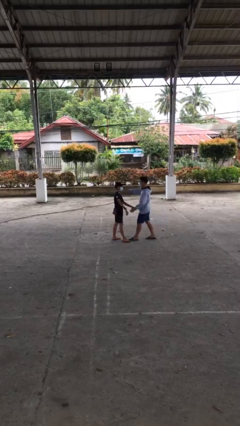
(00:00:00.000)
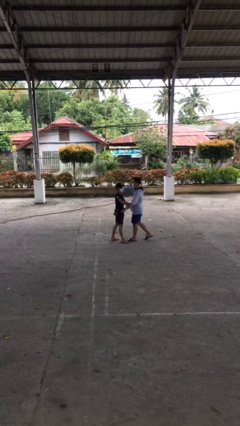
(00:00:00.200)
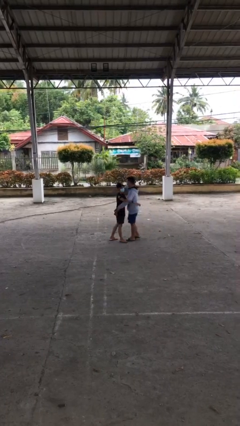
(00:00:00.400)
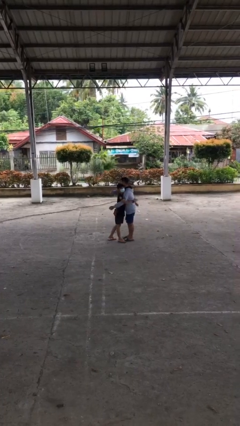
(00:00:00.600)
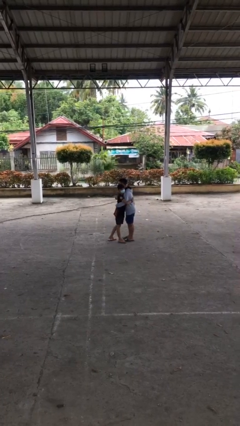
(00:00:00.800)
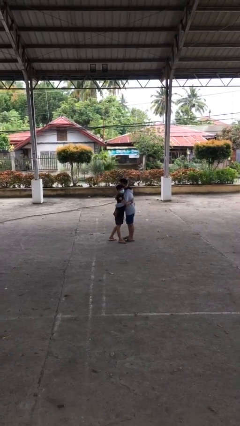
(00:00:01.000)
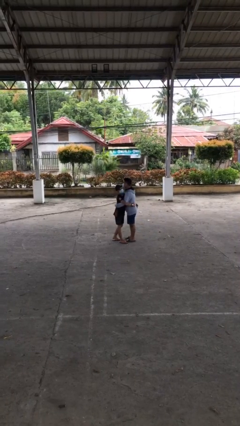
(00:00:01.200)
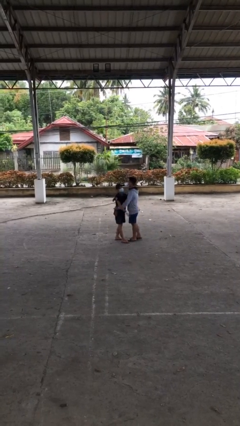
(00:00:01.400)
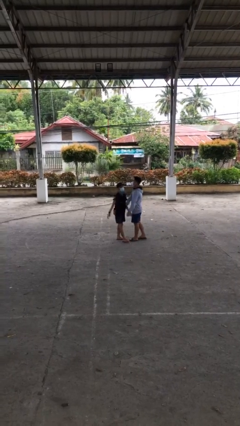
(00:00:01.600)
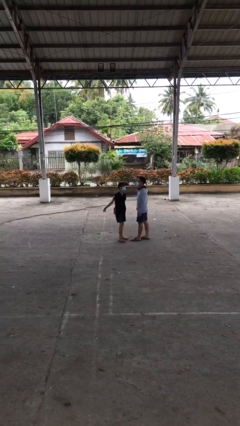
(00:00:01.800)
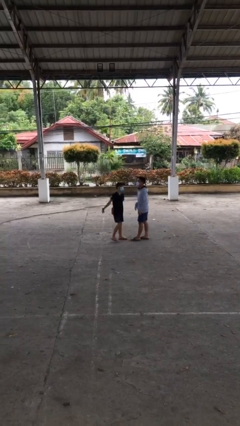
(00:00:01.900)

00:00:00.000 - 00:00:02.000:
person embraces person

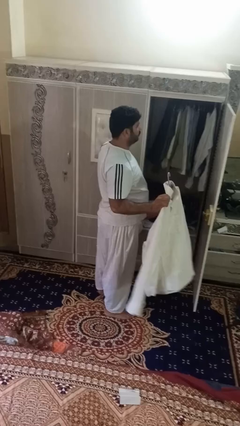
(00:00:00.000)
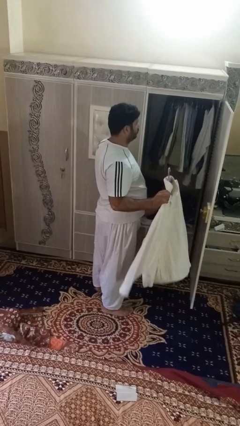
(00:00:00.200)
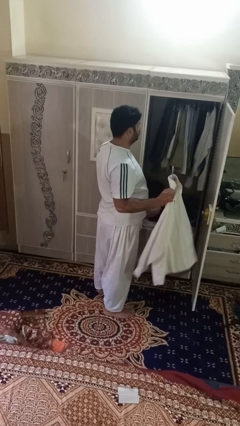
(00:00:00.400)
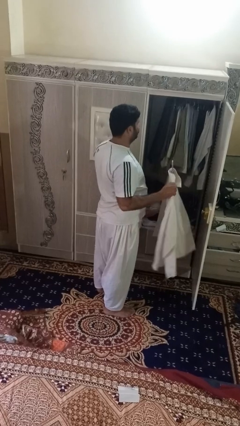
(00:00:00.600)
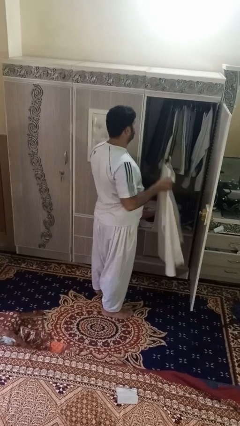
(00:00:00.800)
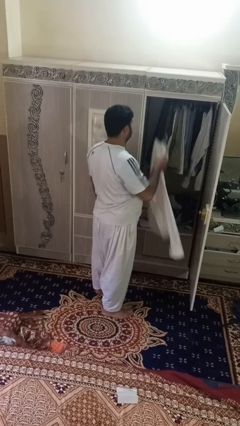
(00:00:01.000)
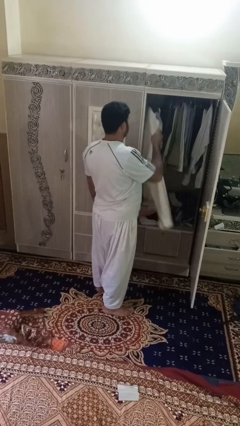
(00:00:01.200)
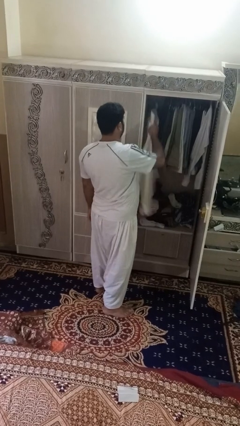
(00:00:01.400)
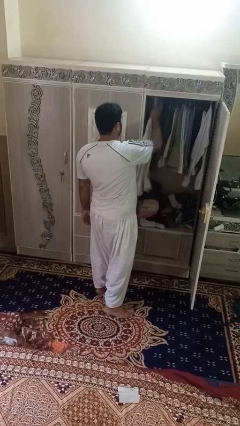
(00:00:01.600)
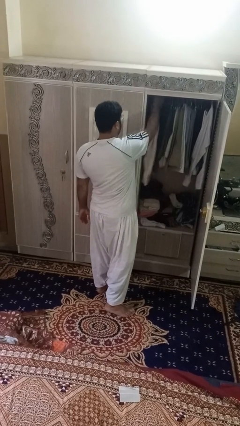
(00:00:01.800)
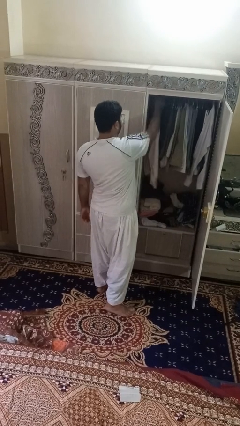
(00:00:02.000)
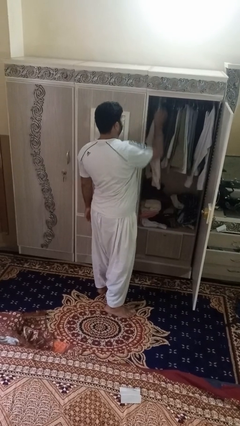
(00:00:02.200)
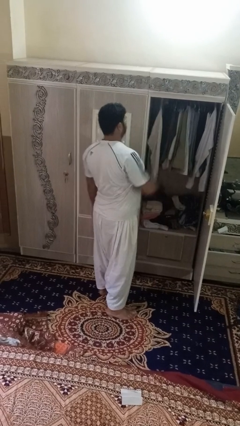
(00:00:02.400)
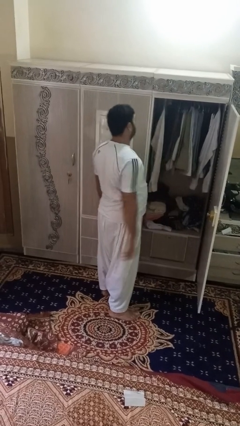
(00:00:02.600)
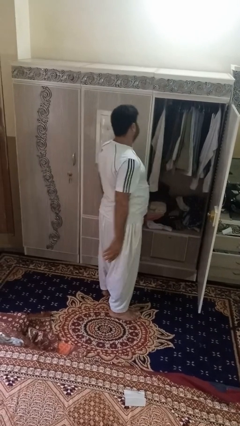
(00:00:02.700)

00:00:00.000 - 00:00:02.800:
person puts clothes into closet

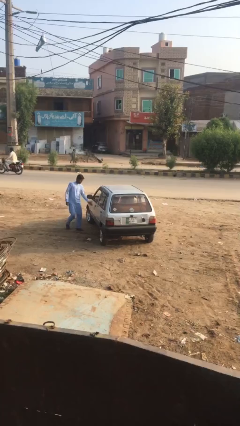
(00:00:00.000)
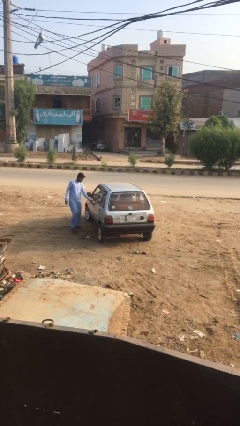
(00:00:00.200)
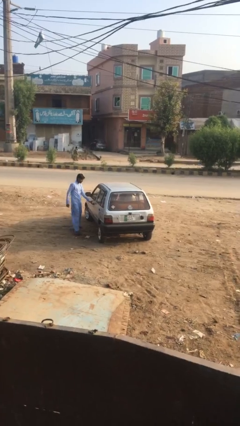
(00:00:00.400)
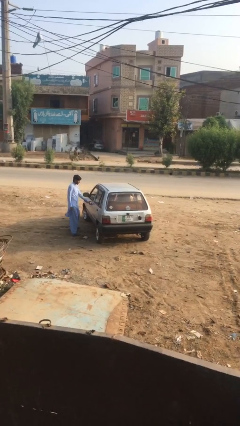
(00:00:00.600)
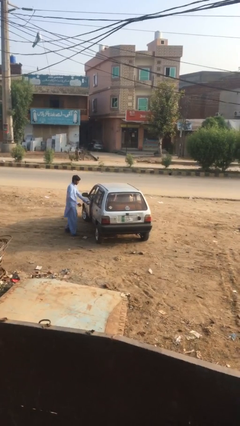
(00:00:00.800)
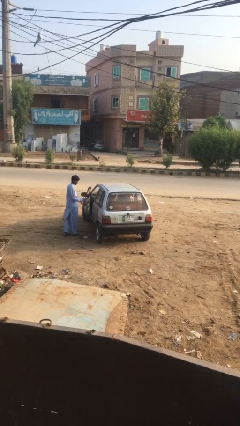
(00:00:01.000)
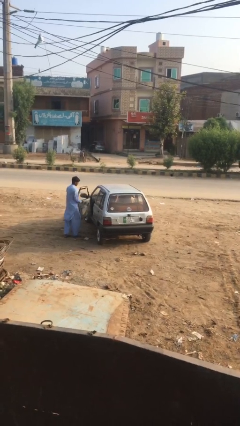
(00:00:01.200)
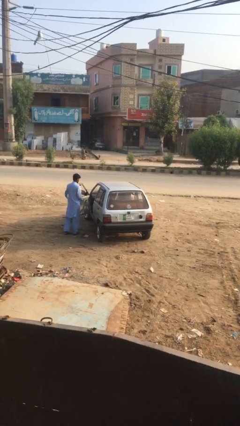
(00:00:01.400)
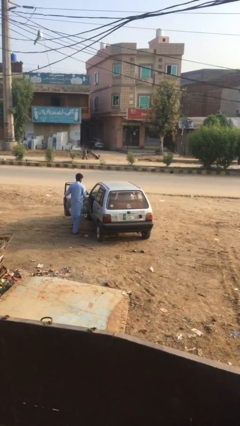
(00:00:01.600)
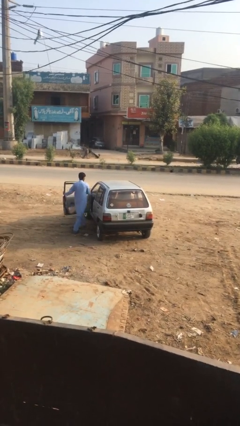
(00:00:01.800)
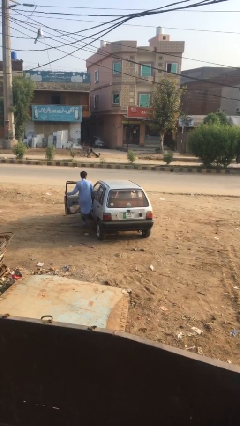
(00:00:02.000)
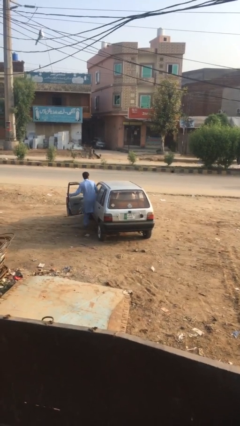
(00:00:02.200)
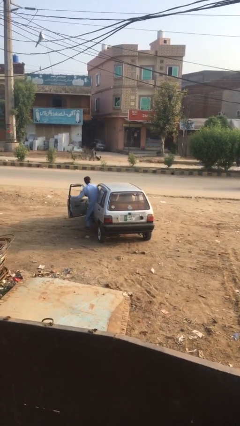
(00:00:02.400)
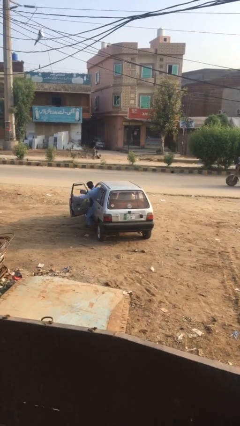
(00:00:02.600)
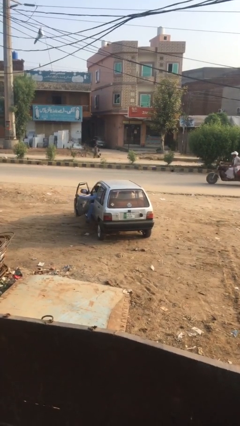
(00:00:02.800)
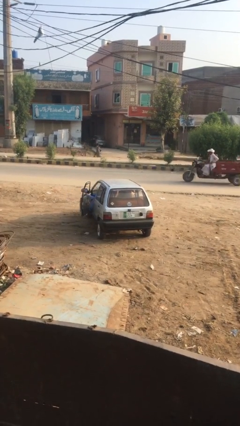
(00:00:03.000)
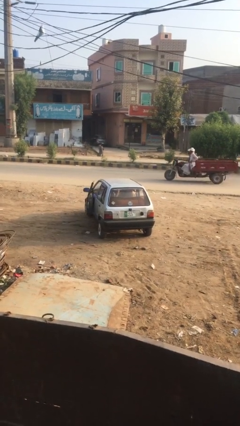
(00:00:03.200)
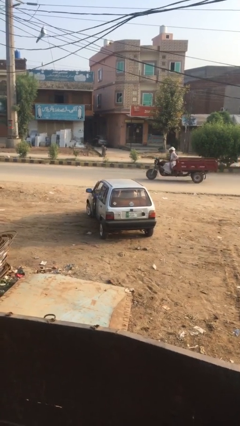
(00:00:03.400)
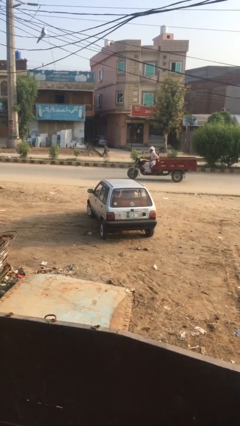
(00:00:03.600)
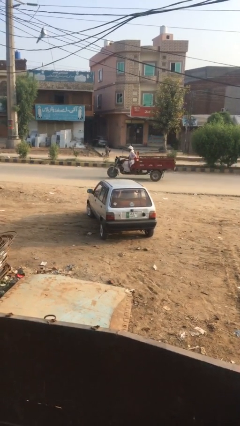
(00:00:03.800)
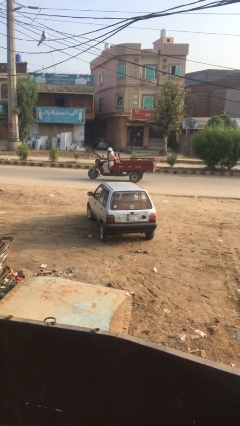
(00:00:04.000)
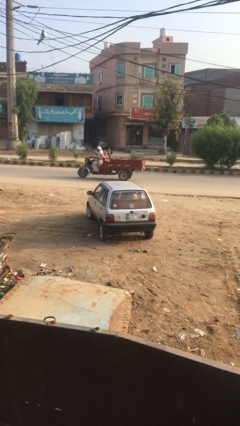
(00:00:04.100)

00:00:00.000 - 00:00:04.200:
car picks up person

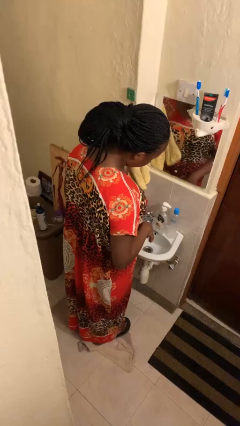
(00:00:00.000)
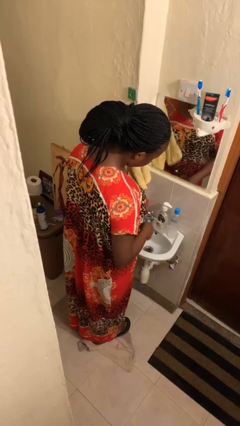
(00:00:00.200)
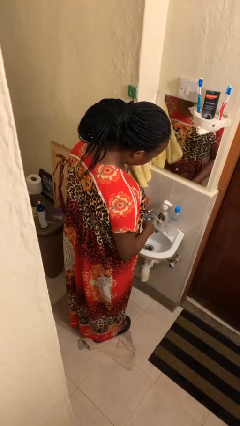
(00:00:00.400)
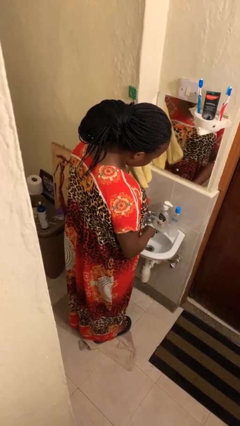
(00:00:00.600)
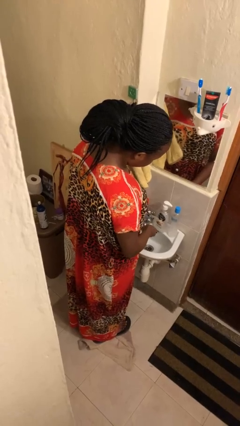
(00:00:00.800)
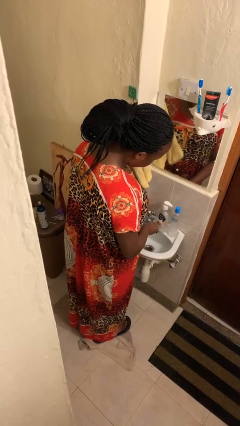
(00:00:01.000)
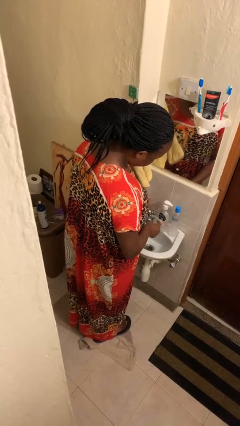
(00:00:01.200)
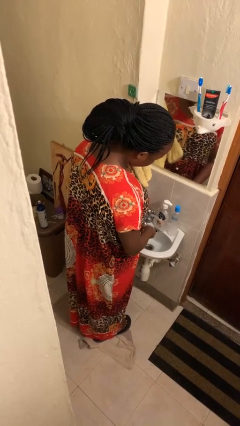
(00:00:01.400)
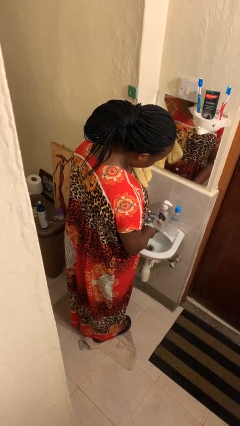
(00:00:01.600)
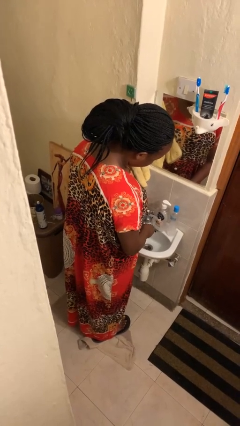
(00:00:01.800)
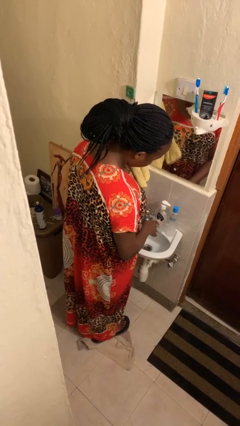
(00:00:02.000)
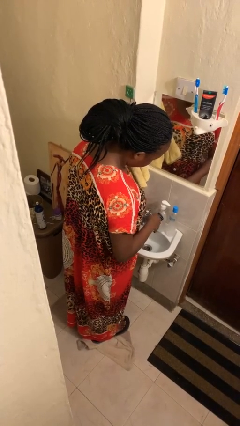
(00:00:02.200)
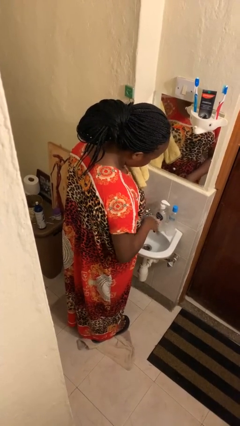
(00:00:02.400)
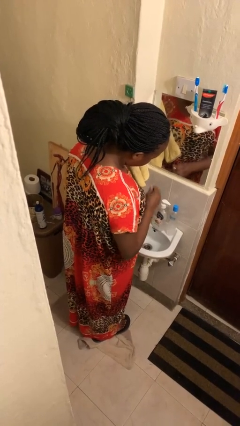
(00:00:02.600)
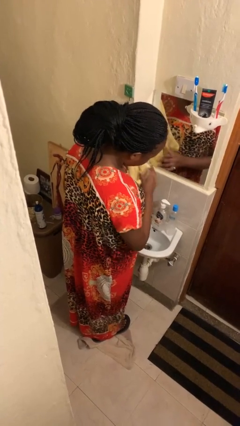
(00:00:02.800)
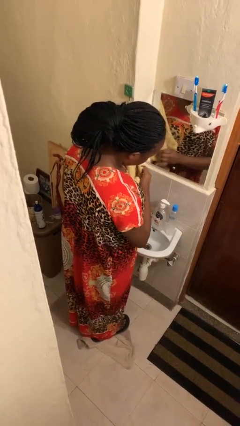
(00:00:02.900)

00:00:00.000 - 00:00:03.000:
person washes hands

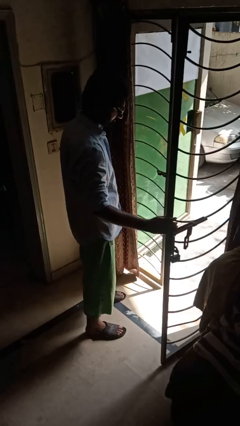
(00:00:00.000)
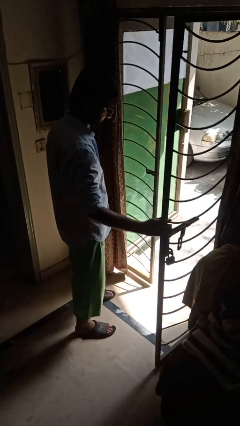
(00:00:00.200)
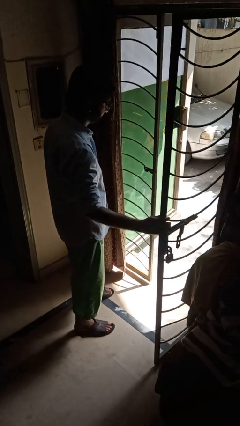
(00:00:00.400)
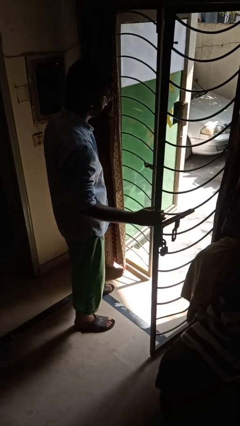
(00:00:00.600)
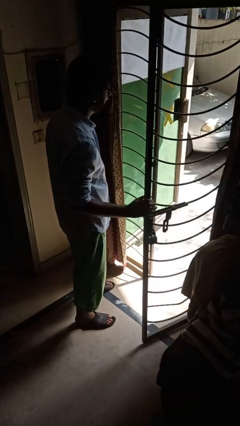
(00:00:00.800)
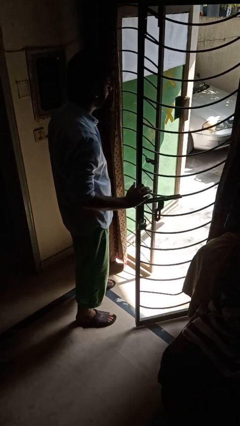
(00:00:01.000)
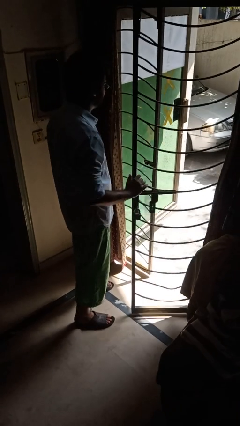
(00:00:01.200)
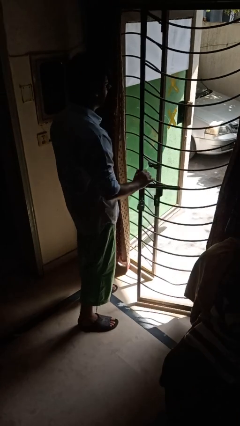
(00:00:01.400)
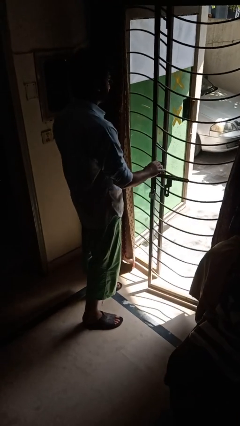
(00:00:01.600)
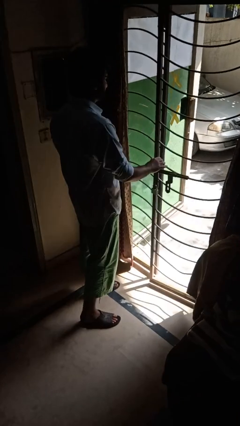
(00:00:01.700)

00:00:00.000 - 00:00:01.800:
person closes gate

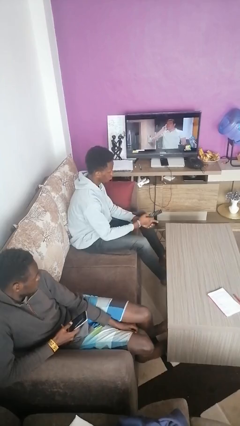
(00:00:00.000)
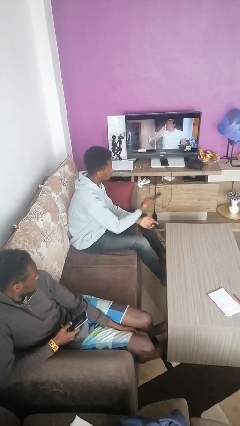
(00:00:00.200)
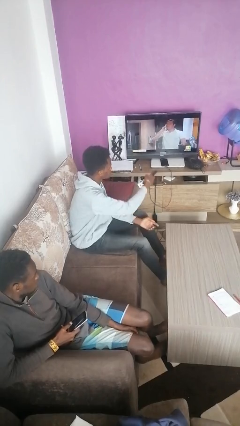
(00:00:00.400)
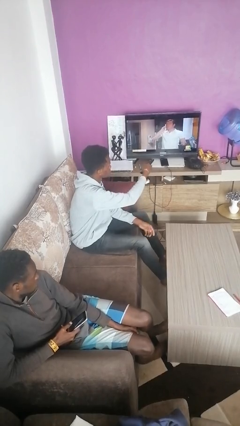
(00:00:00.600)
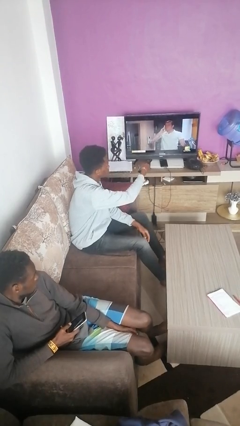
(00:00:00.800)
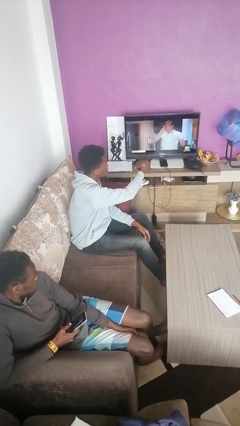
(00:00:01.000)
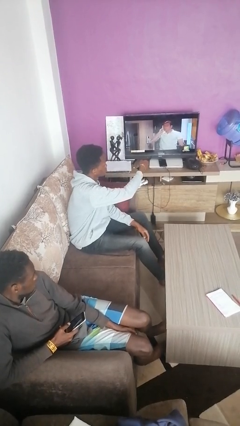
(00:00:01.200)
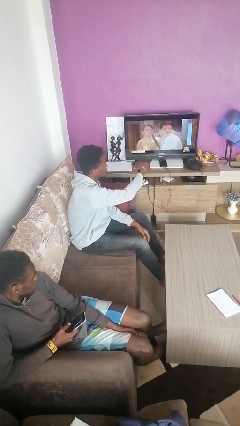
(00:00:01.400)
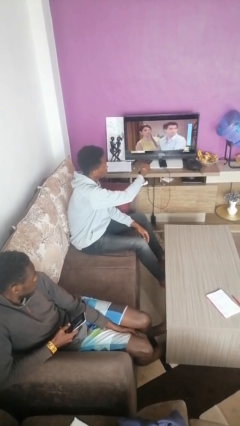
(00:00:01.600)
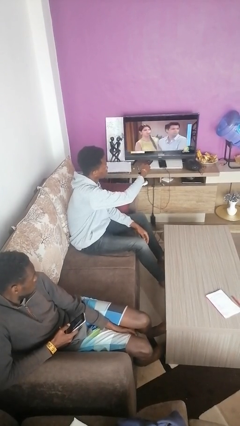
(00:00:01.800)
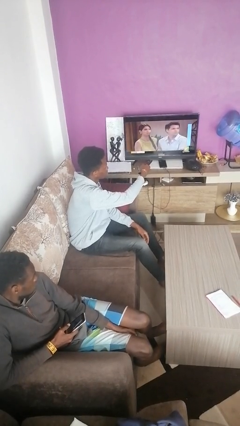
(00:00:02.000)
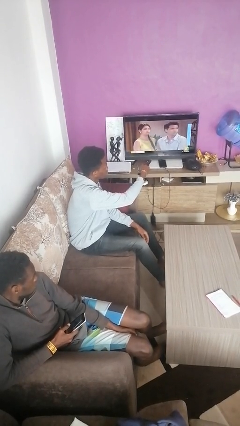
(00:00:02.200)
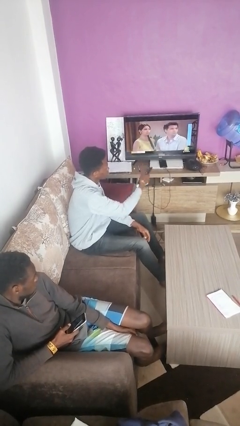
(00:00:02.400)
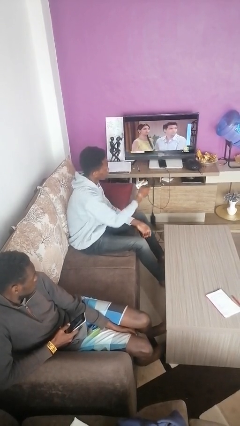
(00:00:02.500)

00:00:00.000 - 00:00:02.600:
person uses television remote

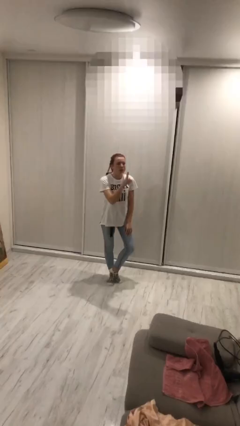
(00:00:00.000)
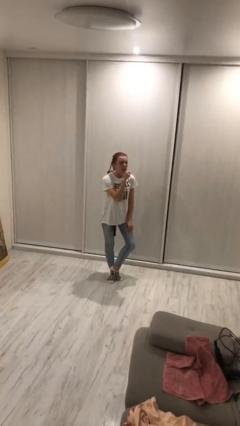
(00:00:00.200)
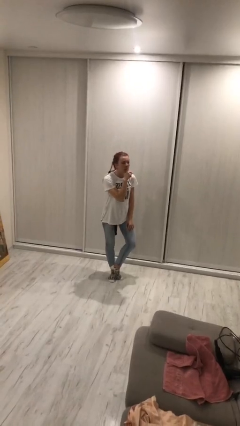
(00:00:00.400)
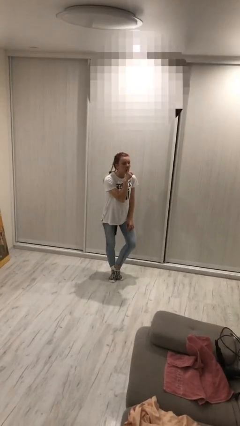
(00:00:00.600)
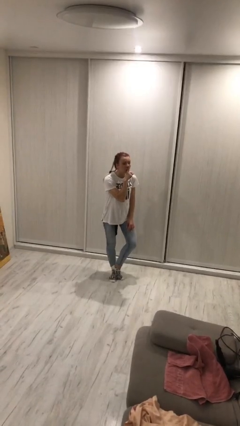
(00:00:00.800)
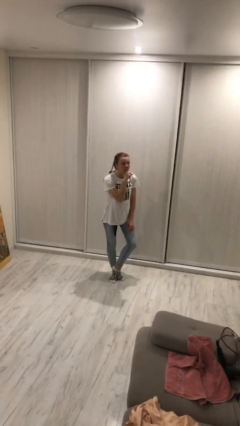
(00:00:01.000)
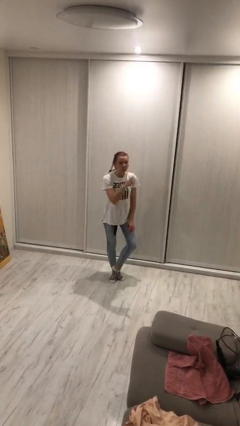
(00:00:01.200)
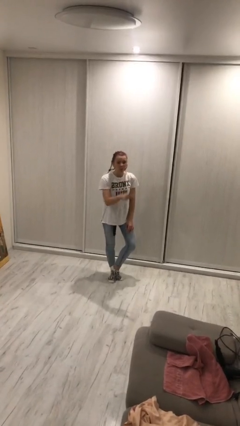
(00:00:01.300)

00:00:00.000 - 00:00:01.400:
person gestures be quiet
